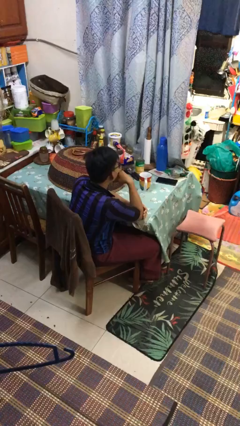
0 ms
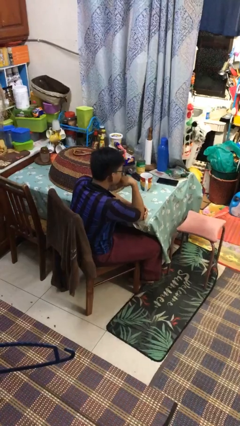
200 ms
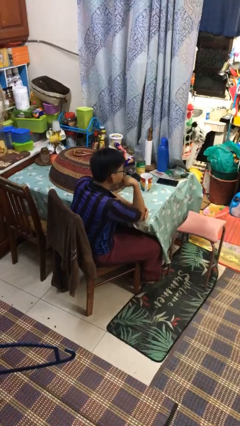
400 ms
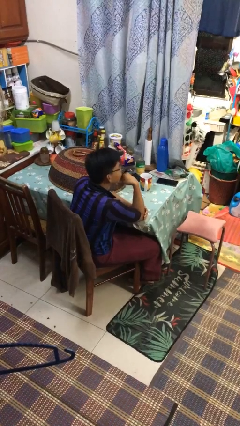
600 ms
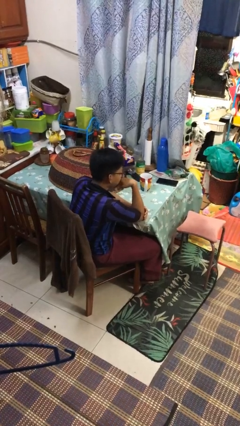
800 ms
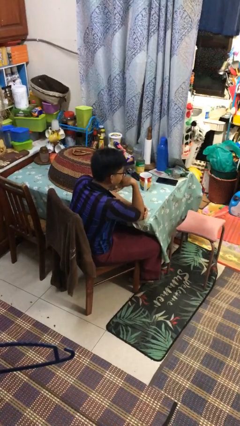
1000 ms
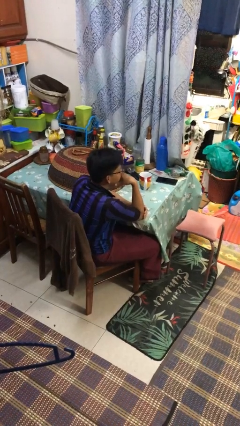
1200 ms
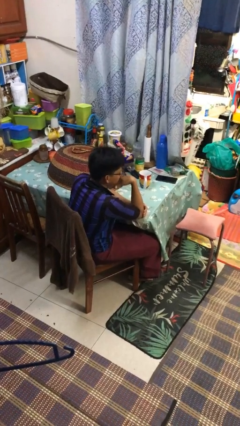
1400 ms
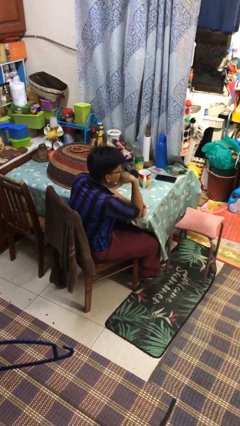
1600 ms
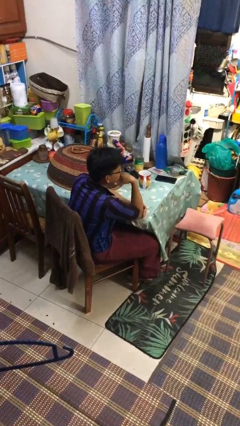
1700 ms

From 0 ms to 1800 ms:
person nods head

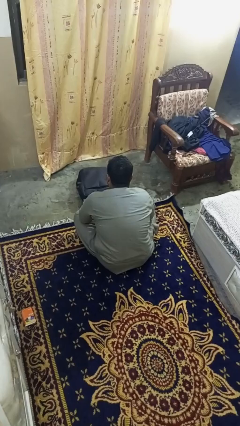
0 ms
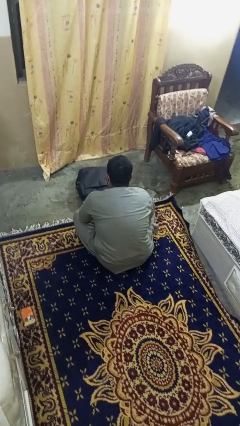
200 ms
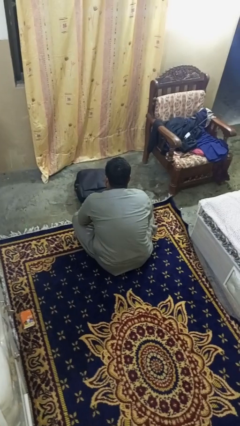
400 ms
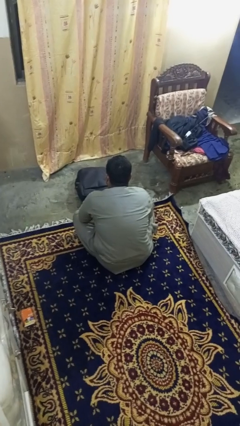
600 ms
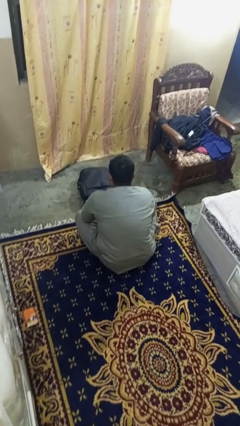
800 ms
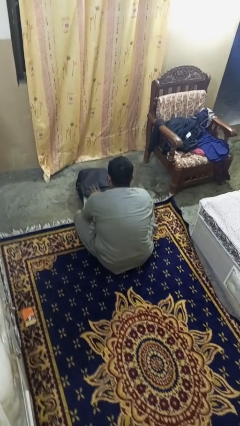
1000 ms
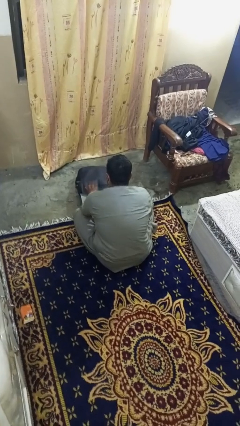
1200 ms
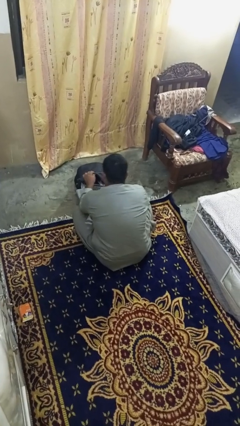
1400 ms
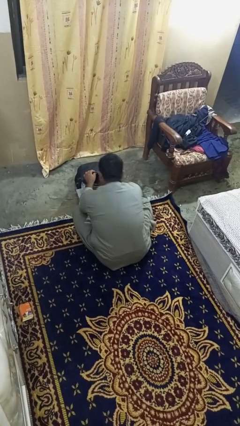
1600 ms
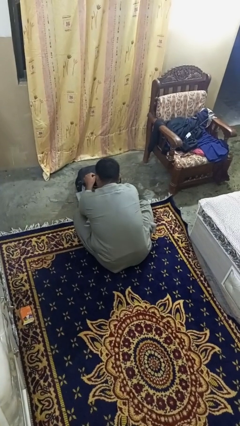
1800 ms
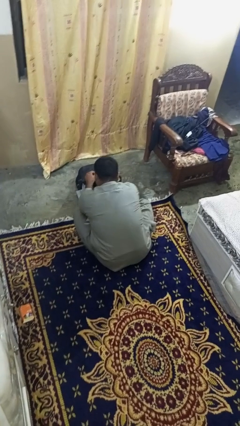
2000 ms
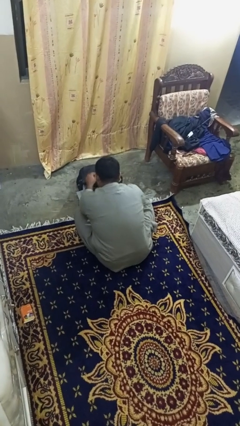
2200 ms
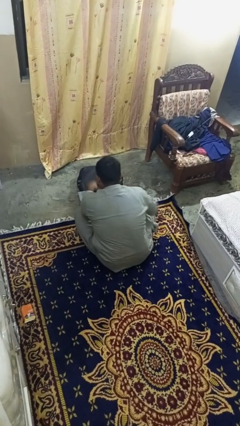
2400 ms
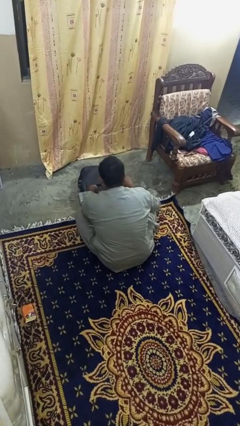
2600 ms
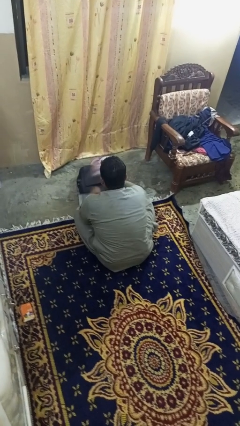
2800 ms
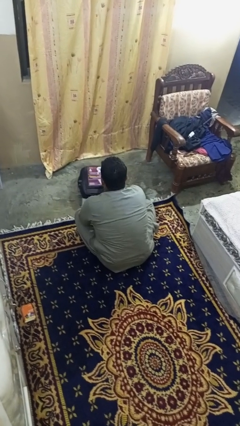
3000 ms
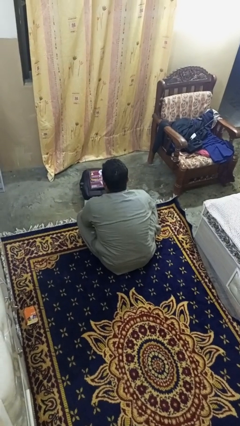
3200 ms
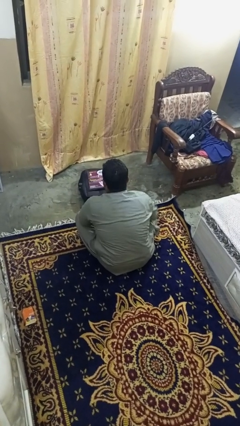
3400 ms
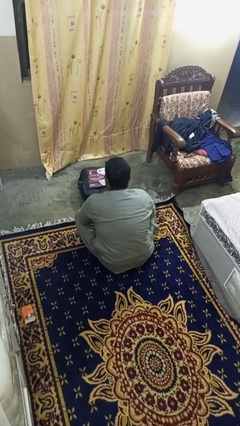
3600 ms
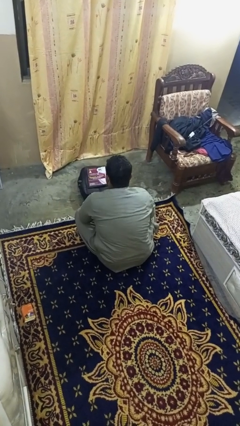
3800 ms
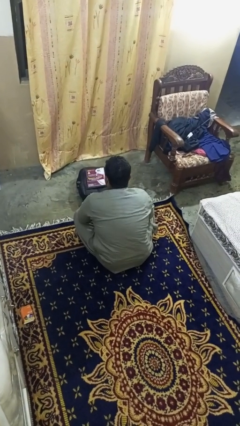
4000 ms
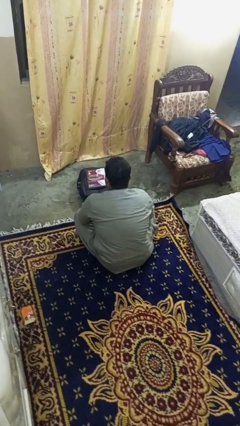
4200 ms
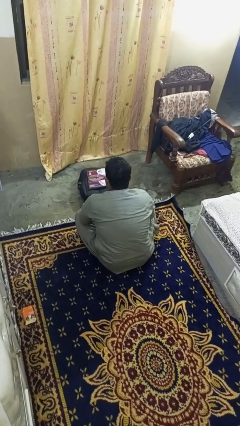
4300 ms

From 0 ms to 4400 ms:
person takes object from bag

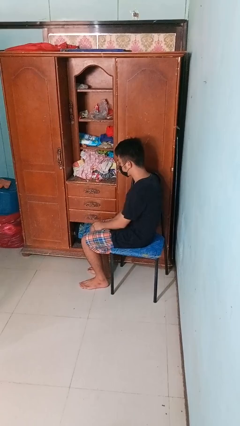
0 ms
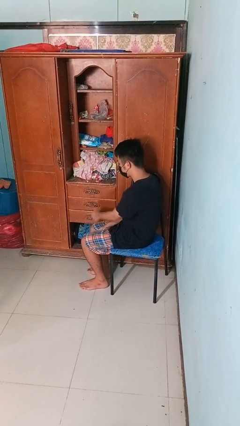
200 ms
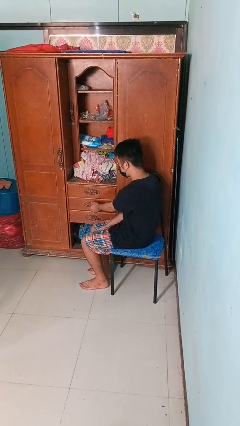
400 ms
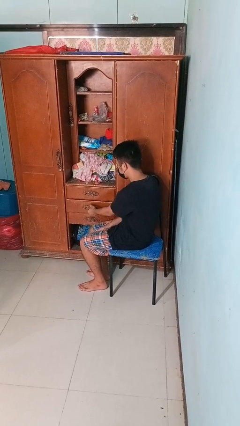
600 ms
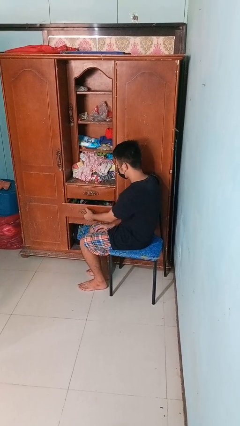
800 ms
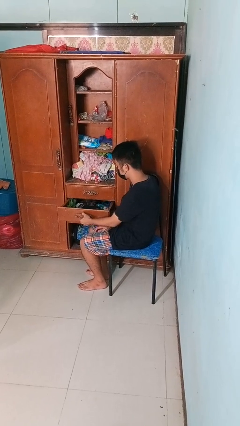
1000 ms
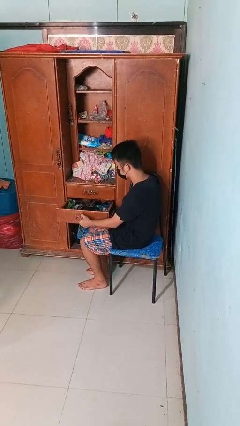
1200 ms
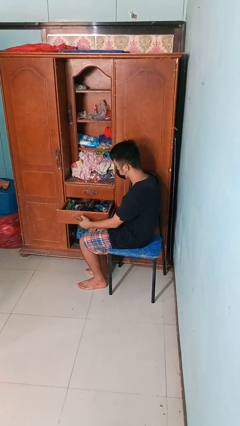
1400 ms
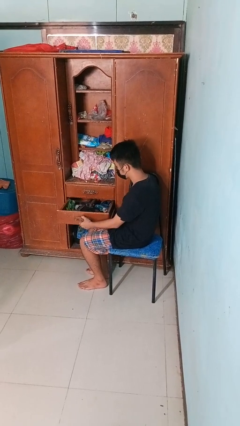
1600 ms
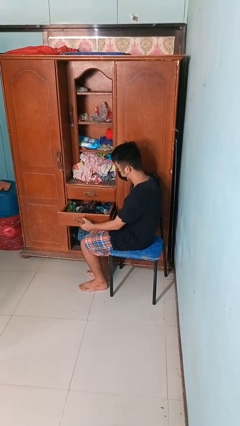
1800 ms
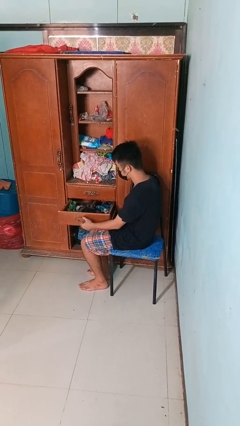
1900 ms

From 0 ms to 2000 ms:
person opens dresser drawer

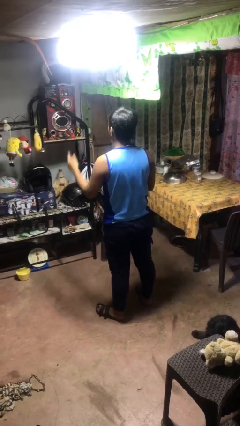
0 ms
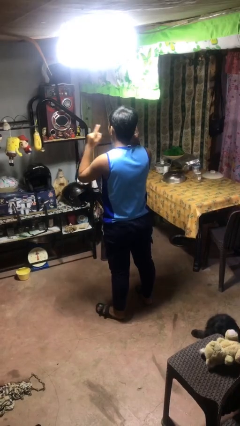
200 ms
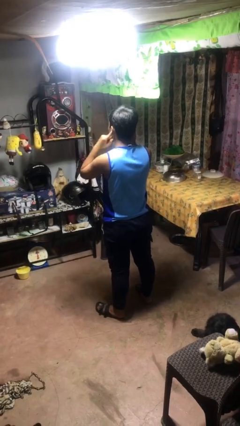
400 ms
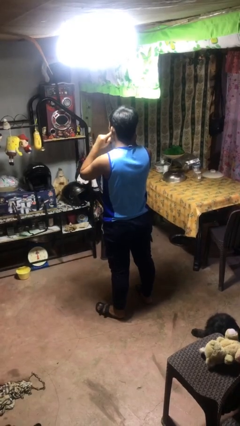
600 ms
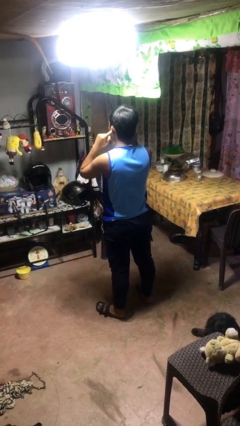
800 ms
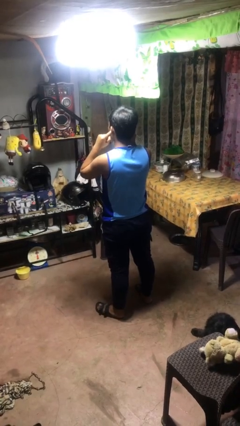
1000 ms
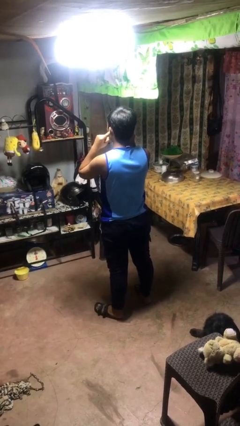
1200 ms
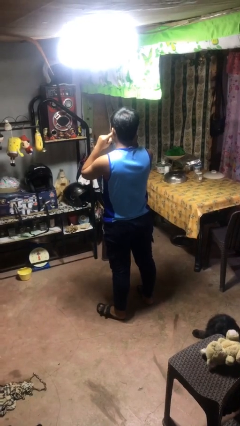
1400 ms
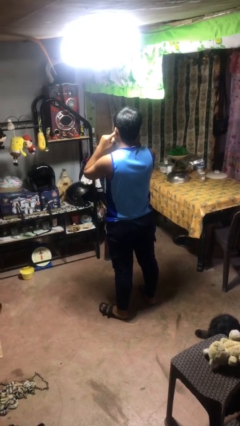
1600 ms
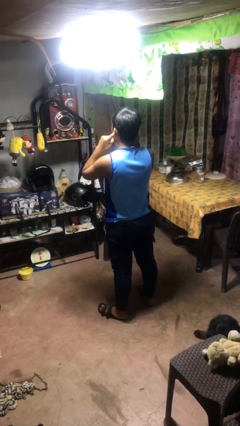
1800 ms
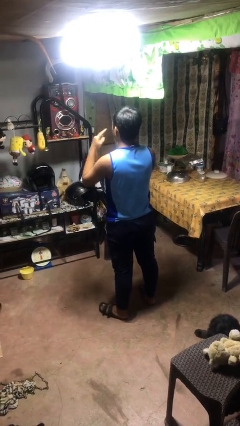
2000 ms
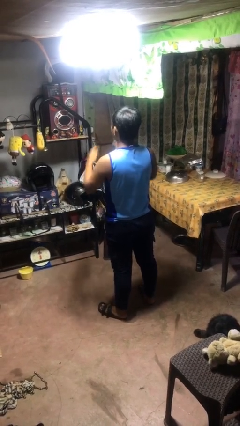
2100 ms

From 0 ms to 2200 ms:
person puts fingers in ear

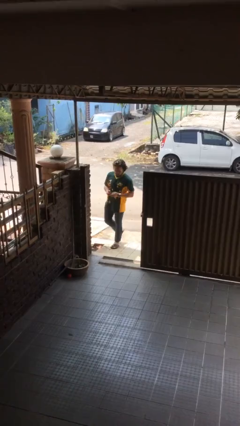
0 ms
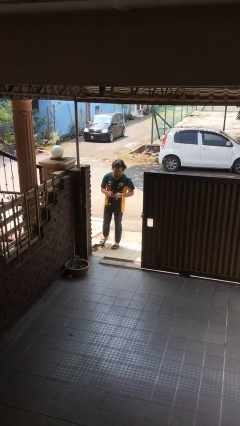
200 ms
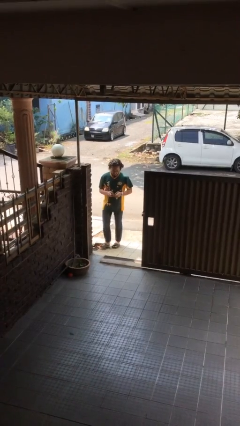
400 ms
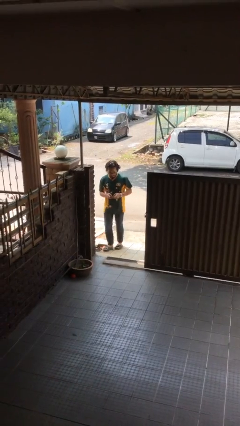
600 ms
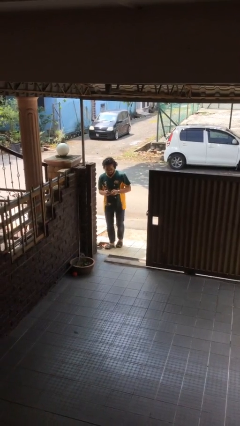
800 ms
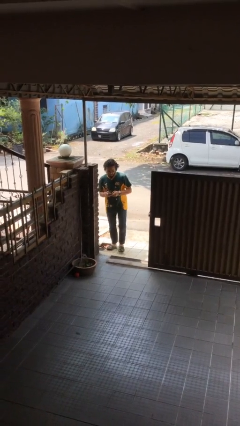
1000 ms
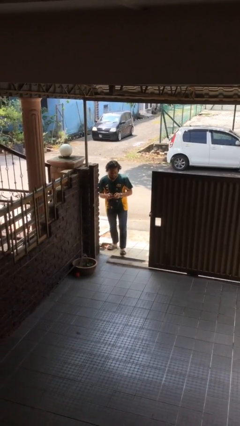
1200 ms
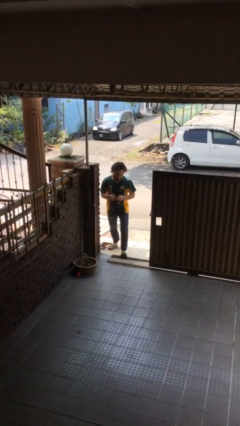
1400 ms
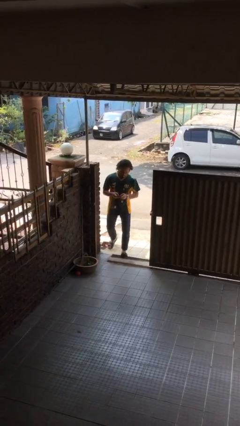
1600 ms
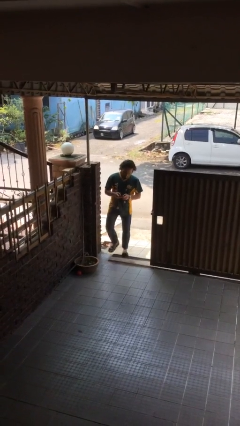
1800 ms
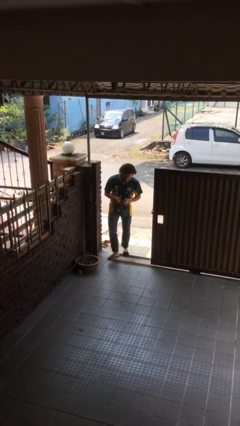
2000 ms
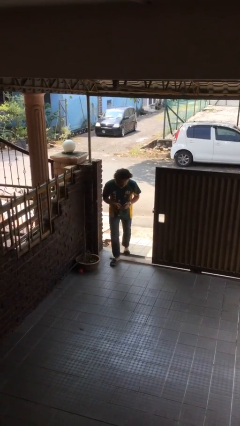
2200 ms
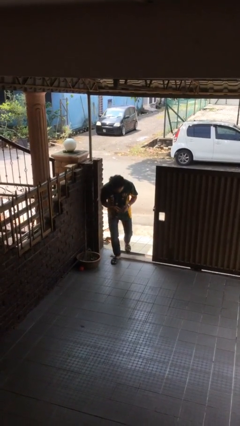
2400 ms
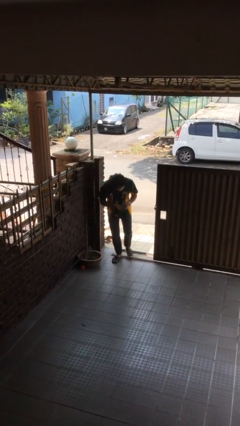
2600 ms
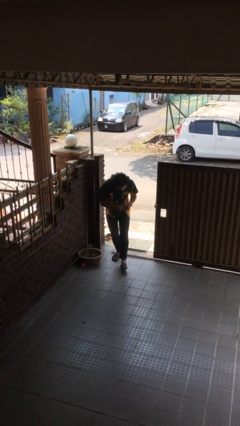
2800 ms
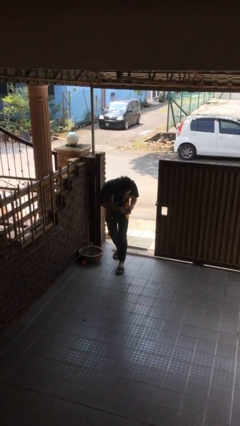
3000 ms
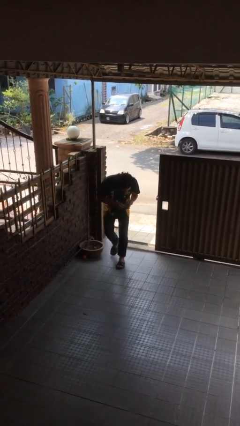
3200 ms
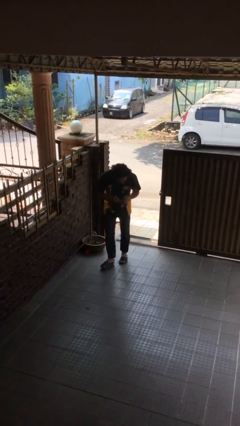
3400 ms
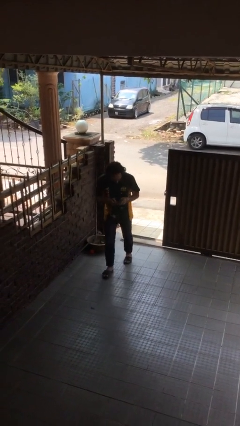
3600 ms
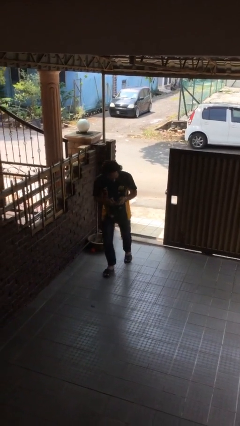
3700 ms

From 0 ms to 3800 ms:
person enters scene through structure

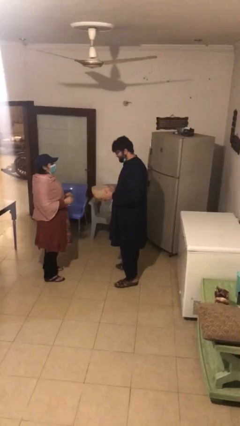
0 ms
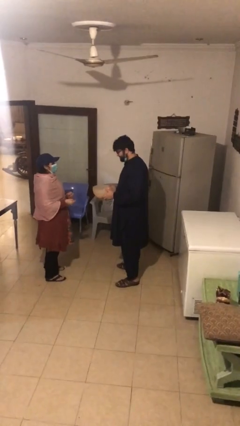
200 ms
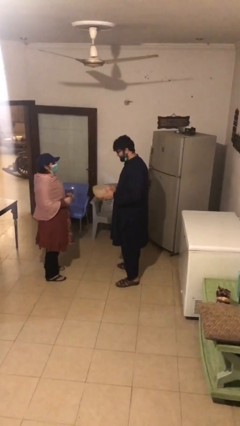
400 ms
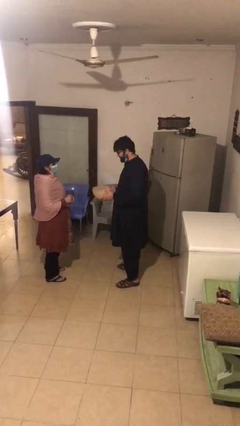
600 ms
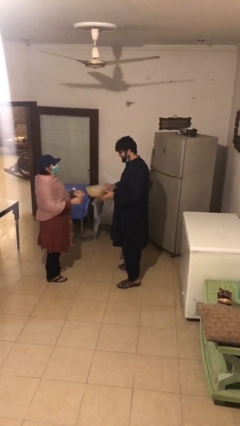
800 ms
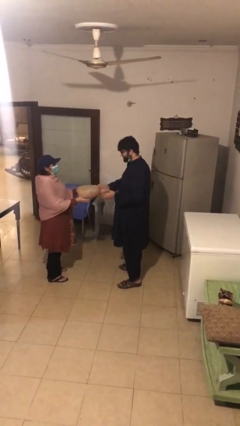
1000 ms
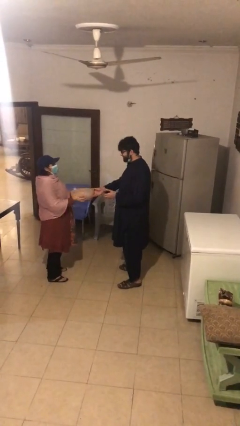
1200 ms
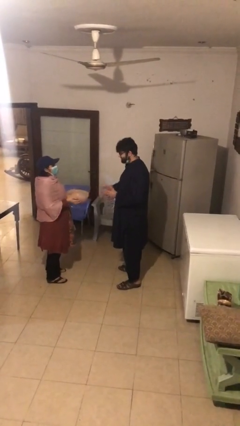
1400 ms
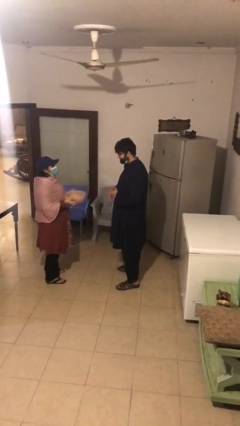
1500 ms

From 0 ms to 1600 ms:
person transfers object to person

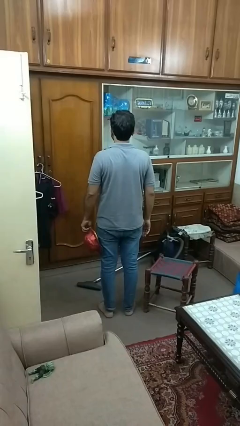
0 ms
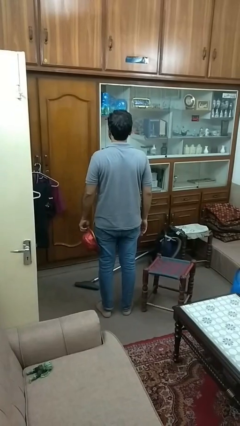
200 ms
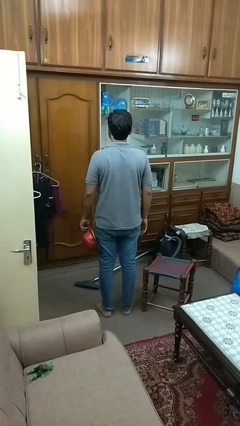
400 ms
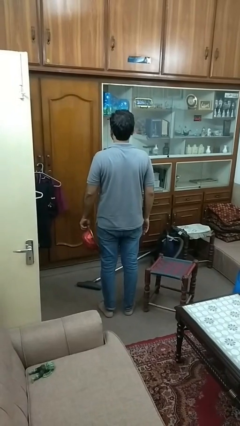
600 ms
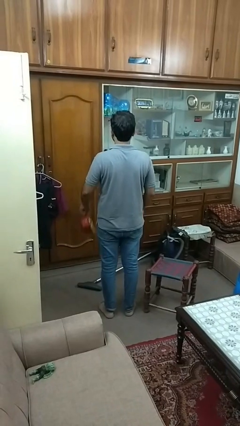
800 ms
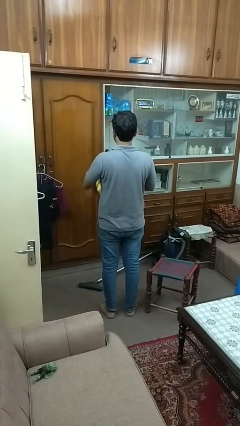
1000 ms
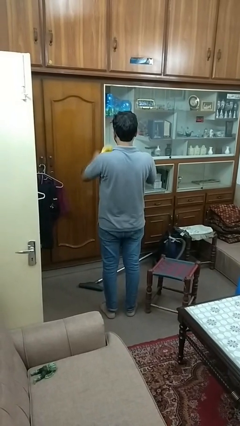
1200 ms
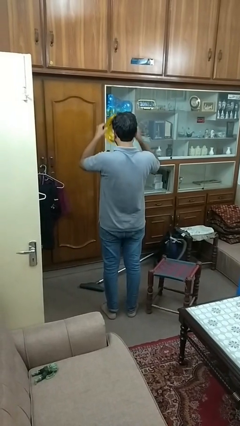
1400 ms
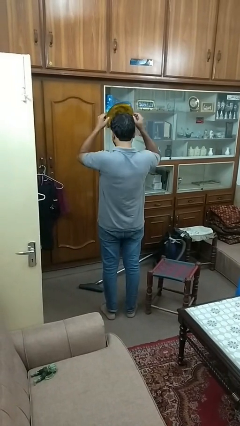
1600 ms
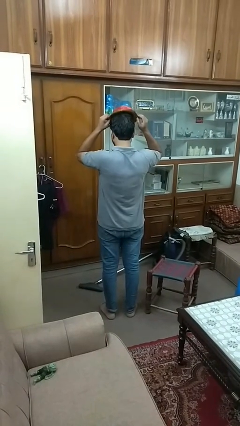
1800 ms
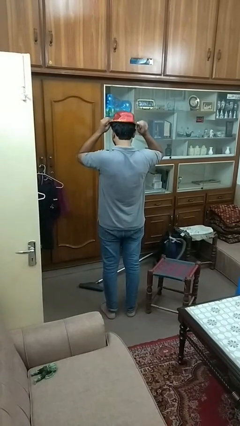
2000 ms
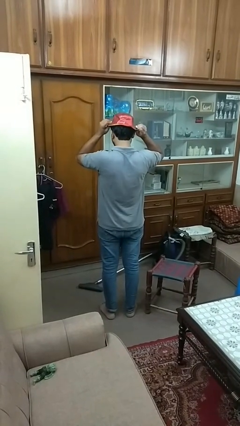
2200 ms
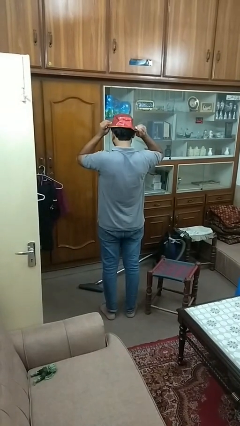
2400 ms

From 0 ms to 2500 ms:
person puts on hat
